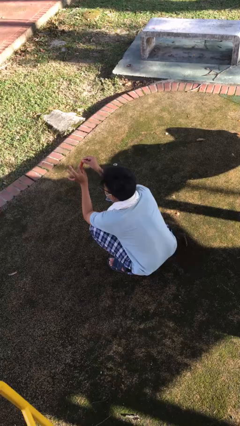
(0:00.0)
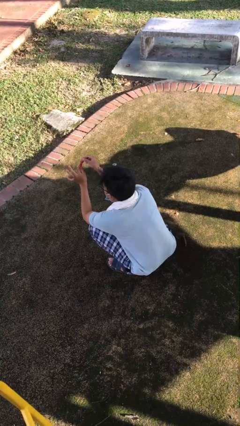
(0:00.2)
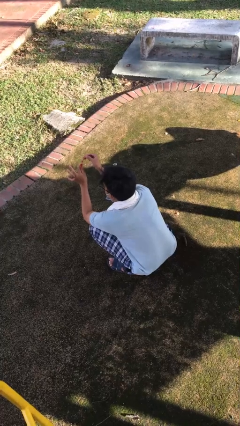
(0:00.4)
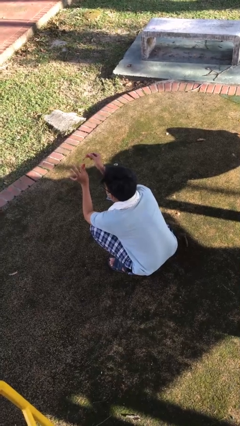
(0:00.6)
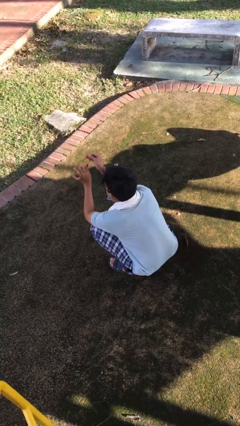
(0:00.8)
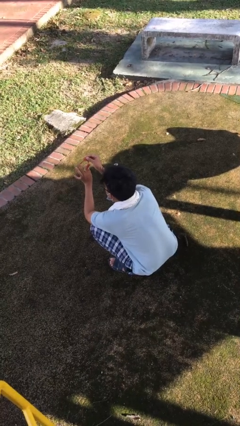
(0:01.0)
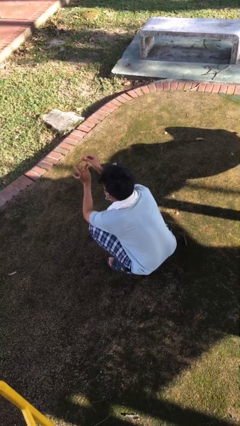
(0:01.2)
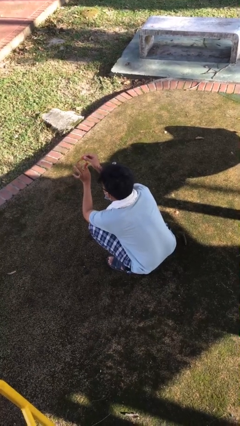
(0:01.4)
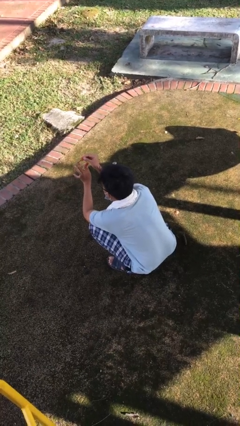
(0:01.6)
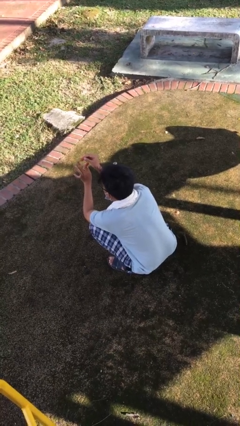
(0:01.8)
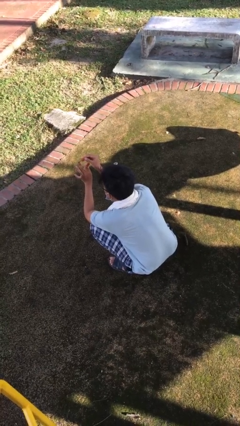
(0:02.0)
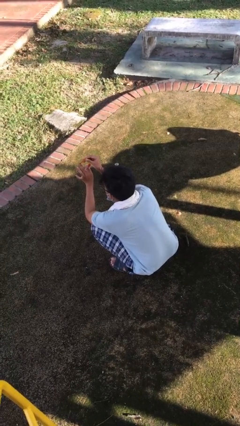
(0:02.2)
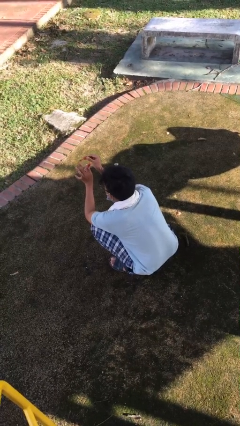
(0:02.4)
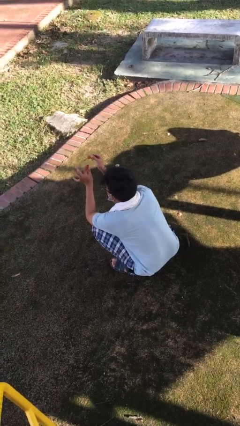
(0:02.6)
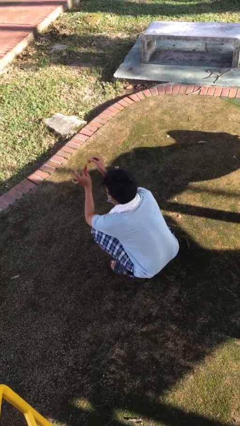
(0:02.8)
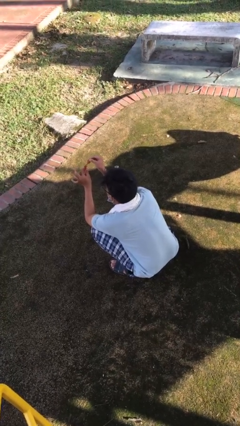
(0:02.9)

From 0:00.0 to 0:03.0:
person paints fingernails

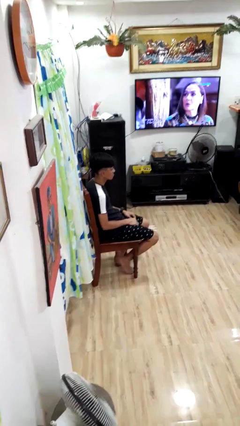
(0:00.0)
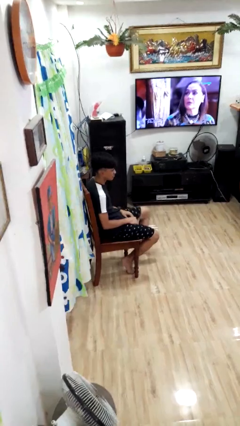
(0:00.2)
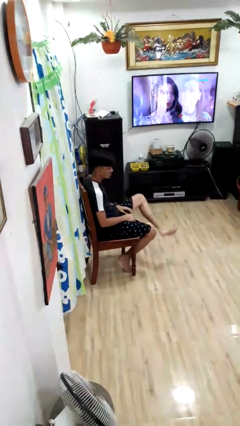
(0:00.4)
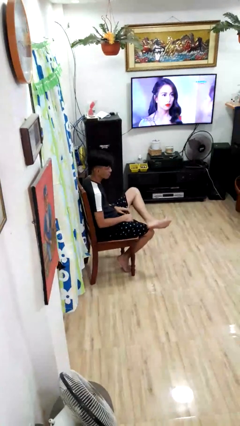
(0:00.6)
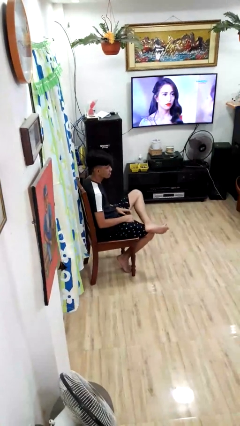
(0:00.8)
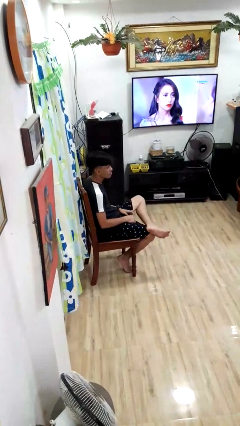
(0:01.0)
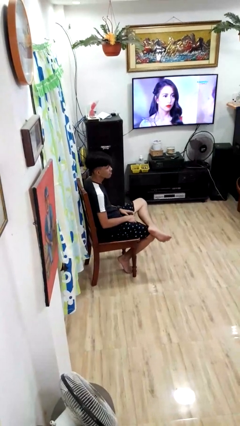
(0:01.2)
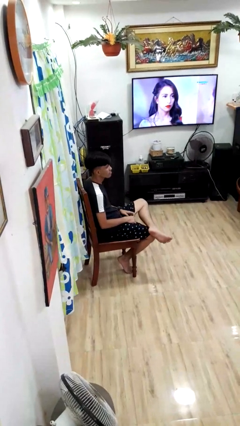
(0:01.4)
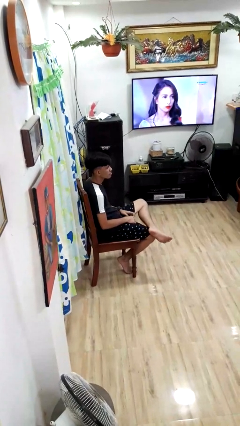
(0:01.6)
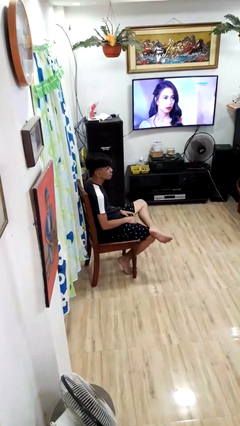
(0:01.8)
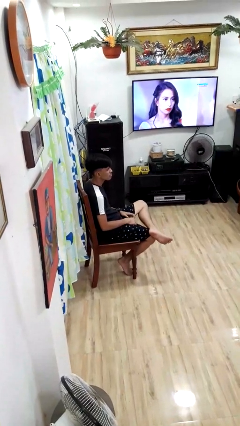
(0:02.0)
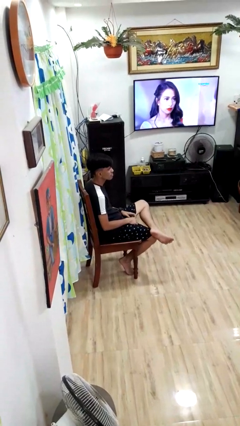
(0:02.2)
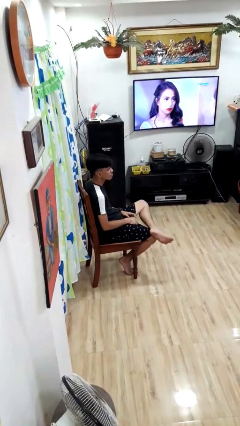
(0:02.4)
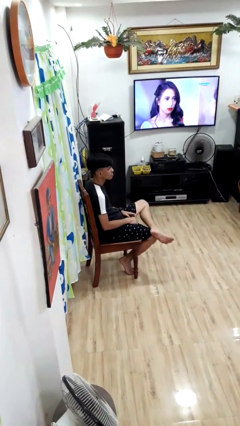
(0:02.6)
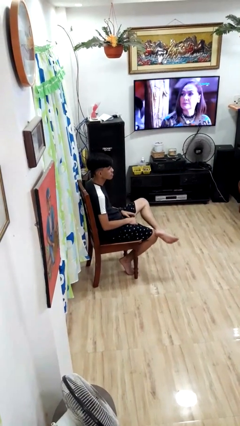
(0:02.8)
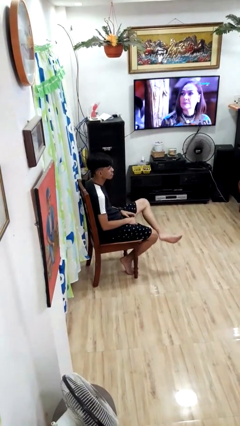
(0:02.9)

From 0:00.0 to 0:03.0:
person crosses legs

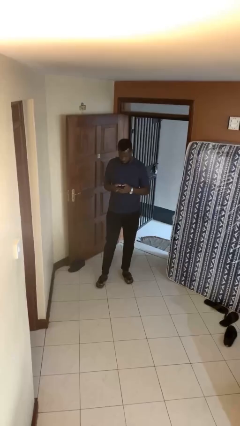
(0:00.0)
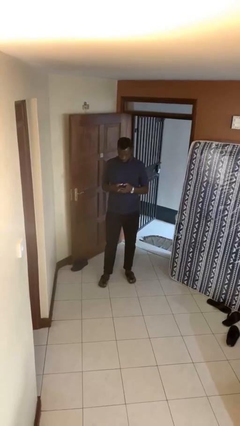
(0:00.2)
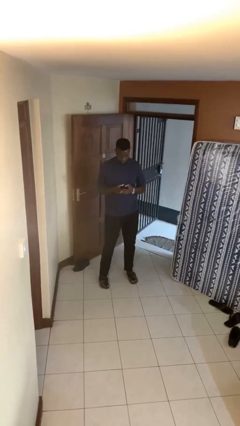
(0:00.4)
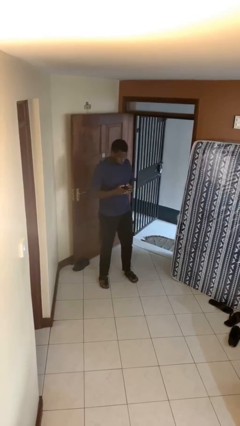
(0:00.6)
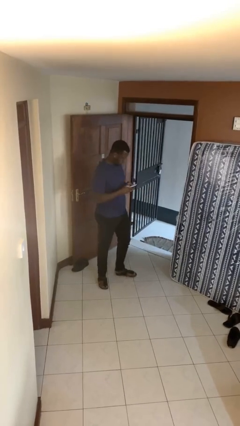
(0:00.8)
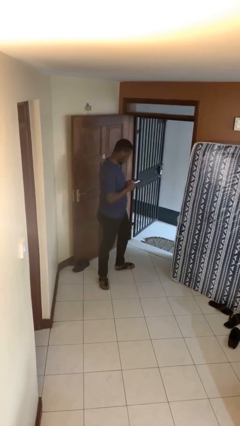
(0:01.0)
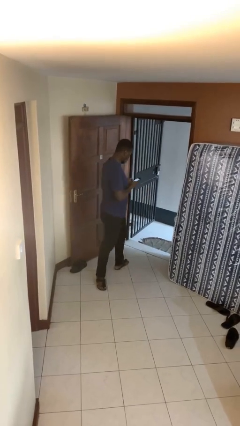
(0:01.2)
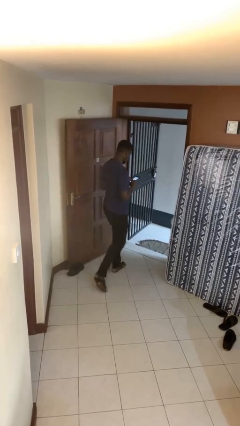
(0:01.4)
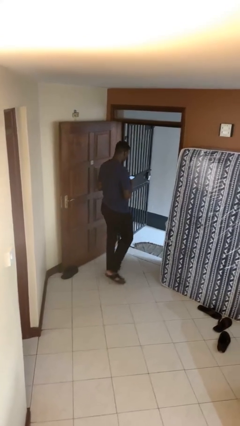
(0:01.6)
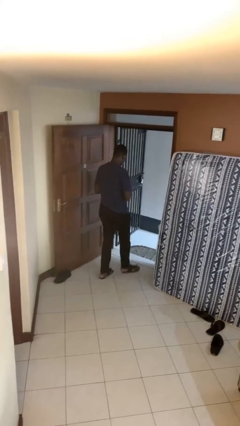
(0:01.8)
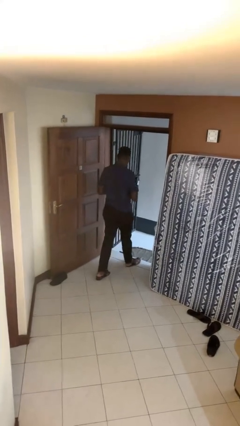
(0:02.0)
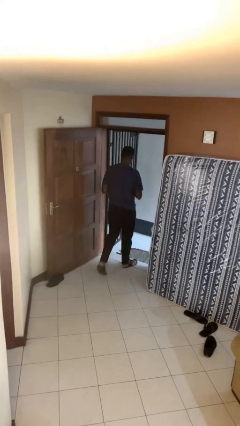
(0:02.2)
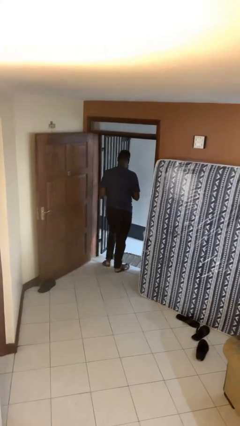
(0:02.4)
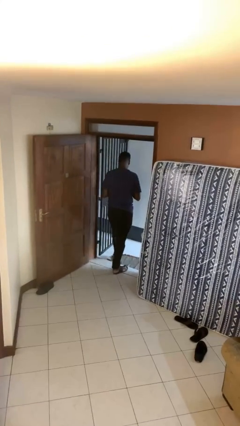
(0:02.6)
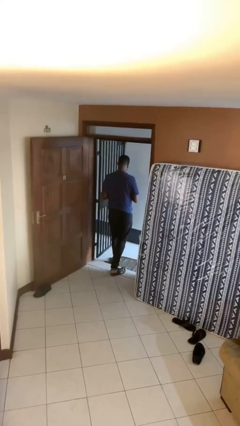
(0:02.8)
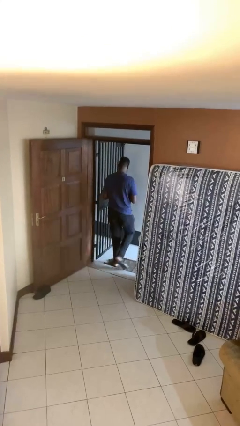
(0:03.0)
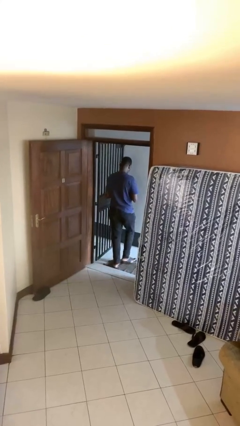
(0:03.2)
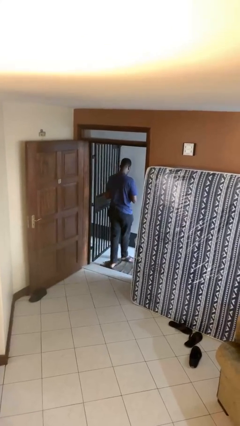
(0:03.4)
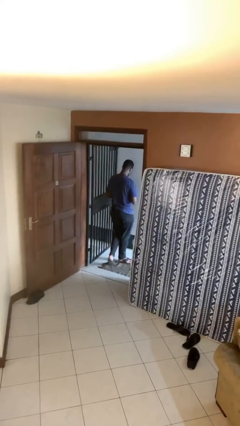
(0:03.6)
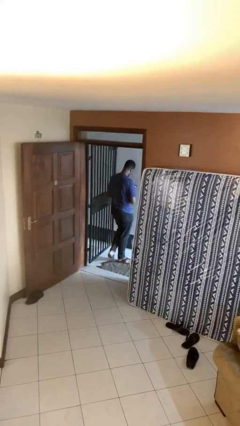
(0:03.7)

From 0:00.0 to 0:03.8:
person exits scene through structure

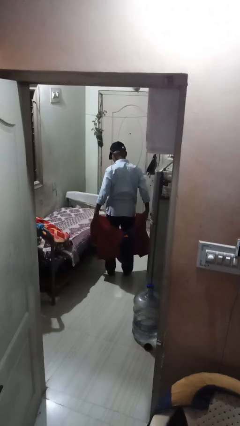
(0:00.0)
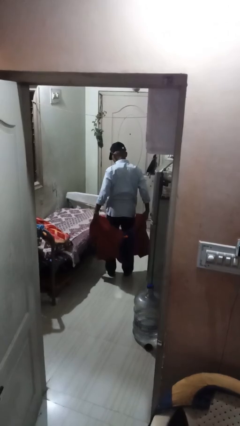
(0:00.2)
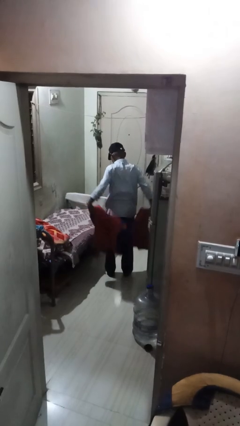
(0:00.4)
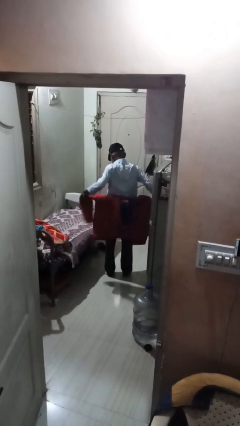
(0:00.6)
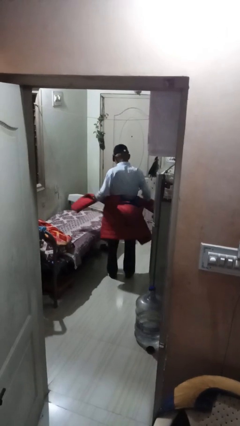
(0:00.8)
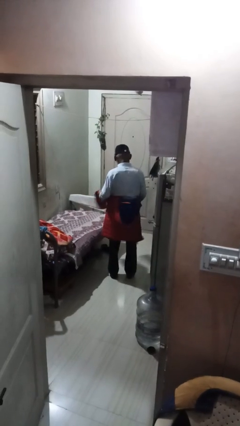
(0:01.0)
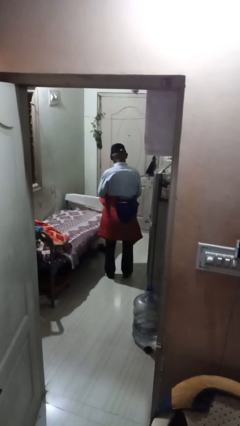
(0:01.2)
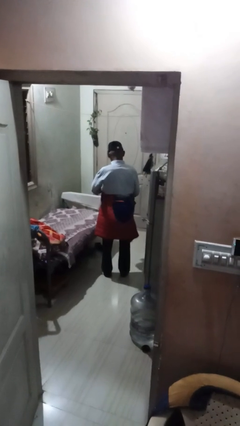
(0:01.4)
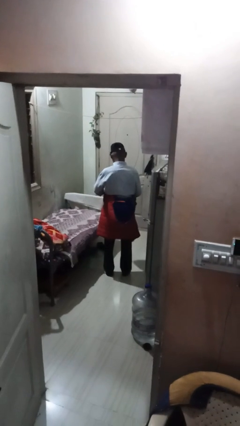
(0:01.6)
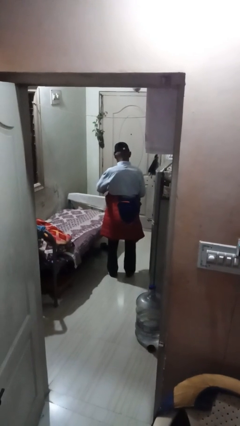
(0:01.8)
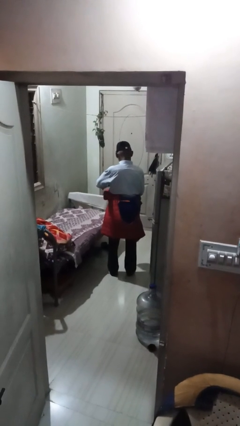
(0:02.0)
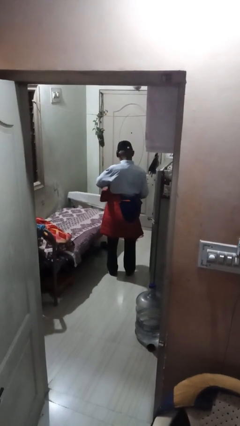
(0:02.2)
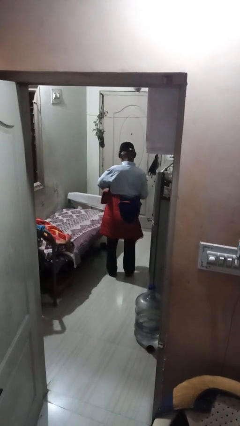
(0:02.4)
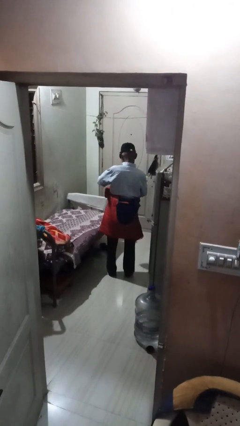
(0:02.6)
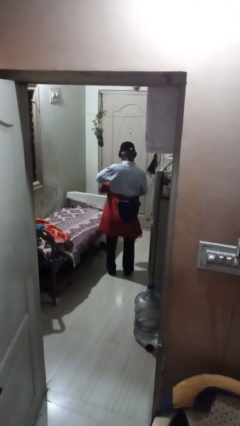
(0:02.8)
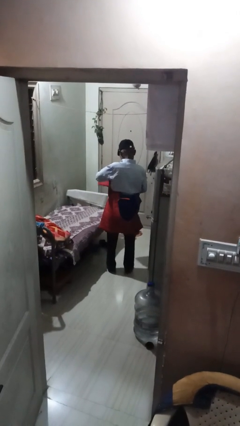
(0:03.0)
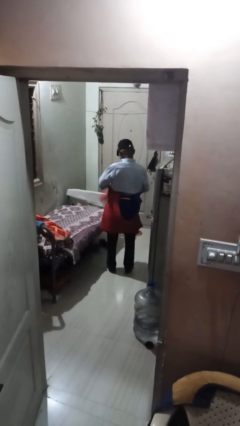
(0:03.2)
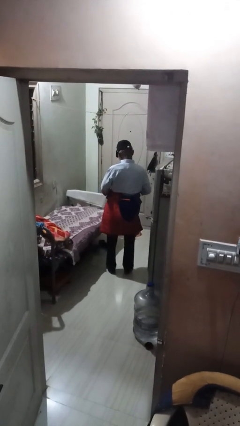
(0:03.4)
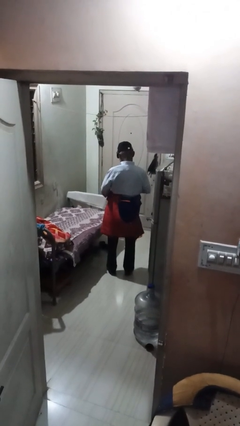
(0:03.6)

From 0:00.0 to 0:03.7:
person ties jacket around waist

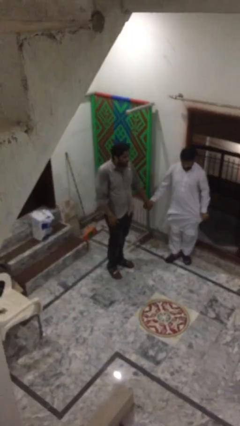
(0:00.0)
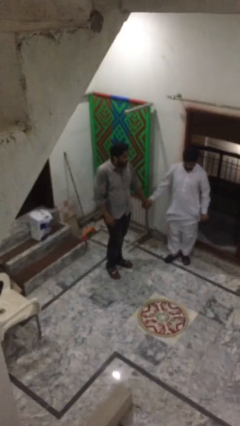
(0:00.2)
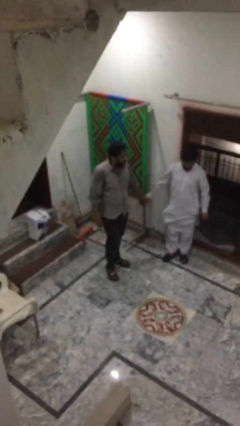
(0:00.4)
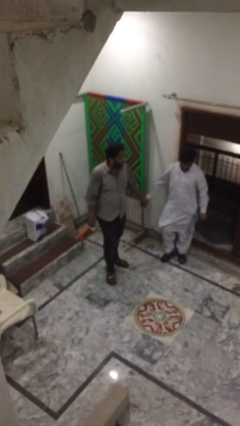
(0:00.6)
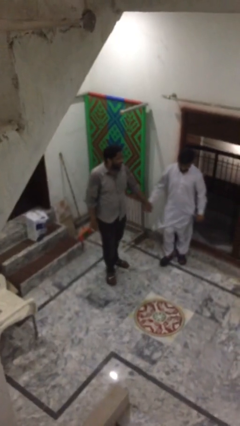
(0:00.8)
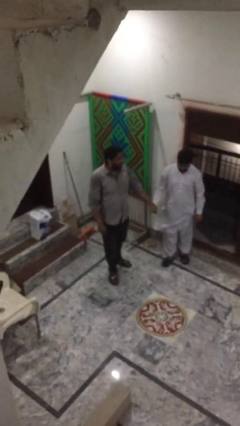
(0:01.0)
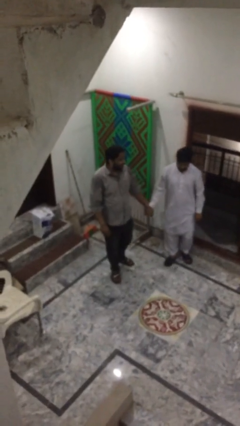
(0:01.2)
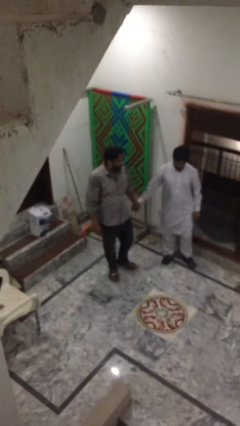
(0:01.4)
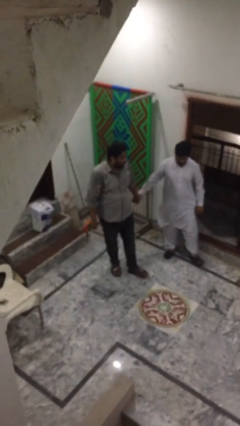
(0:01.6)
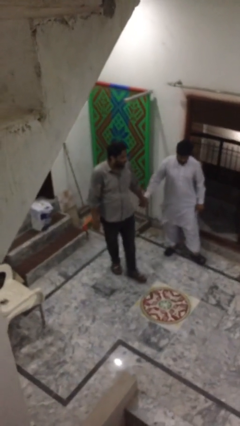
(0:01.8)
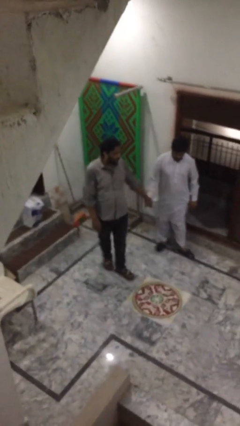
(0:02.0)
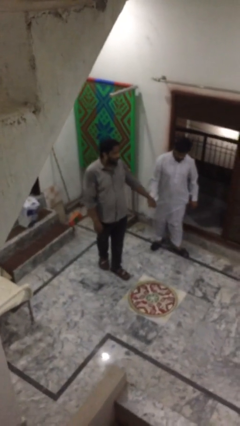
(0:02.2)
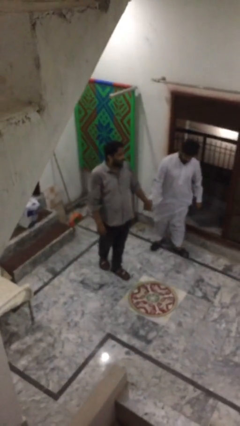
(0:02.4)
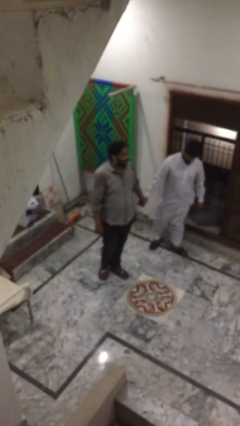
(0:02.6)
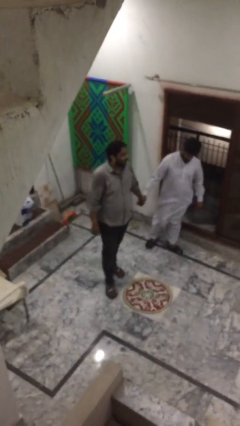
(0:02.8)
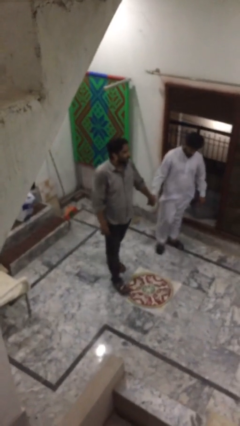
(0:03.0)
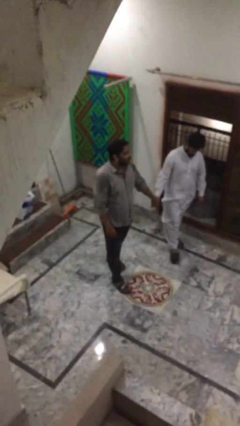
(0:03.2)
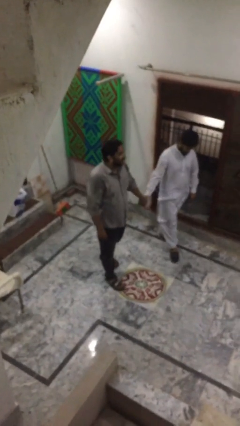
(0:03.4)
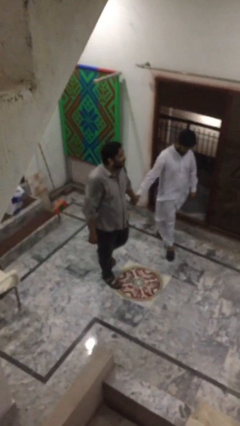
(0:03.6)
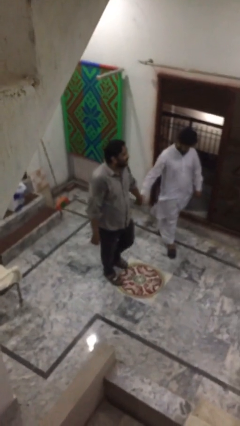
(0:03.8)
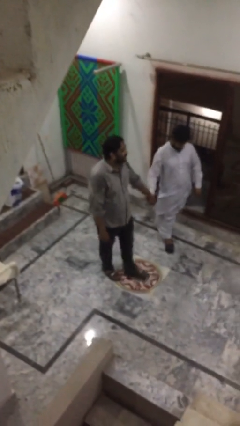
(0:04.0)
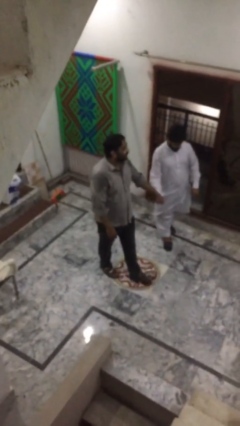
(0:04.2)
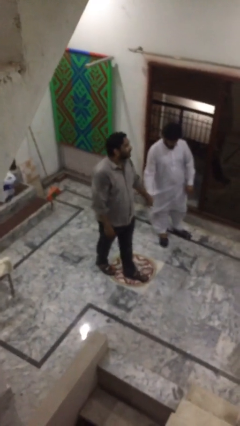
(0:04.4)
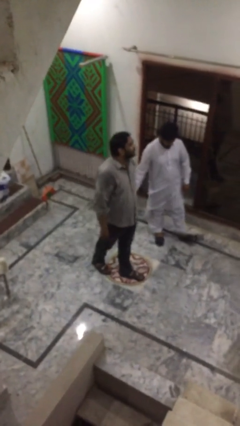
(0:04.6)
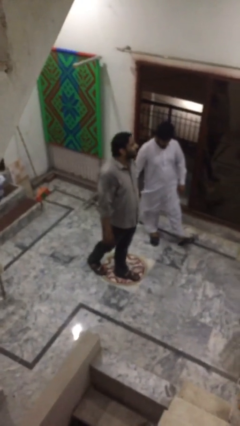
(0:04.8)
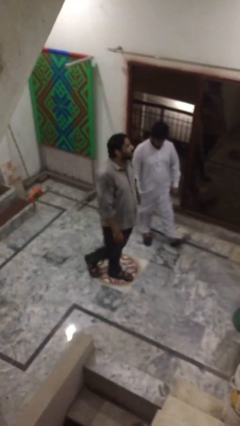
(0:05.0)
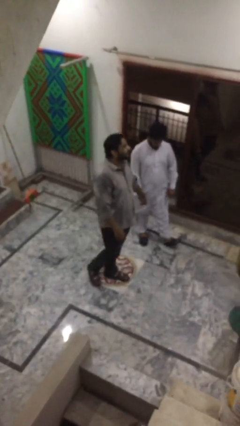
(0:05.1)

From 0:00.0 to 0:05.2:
person holds hand
